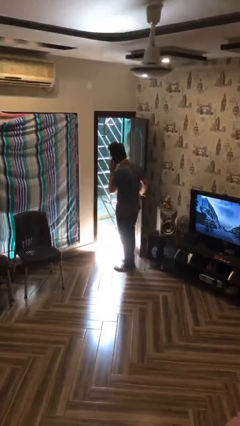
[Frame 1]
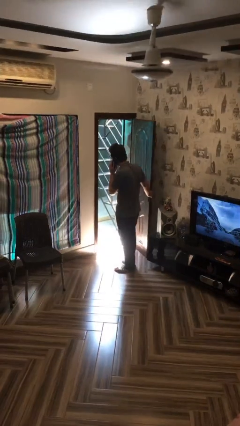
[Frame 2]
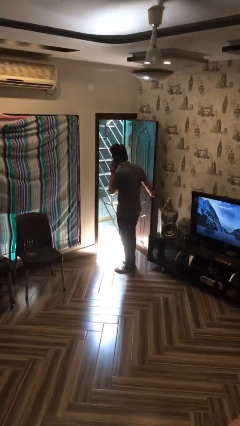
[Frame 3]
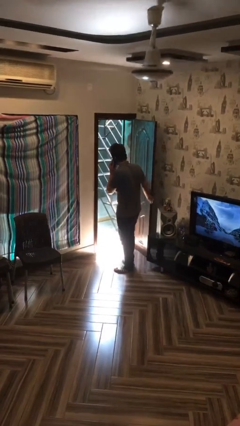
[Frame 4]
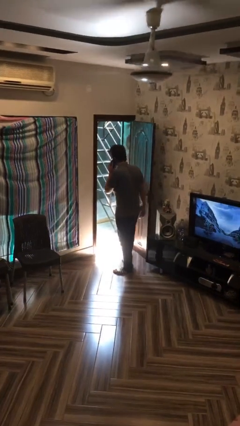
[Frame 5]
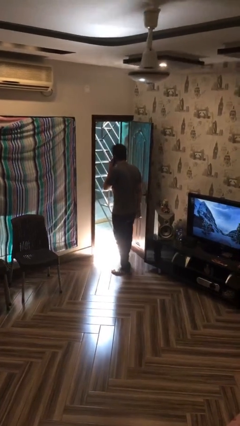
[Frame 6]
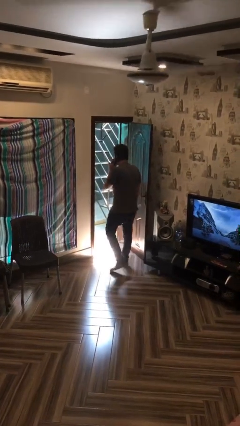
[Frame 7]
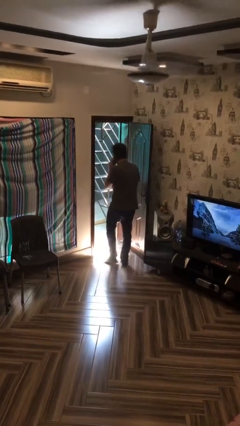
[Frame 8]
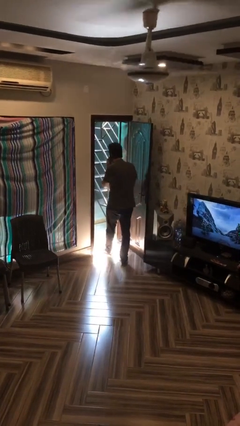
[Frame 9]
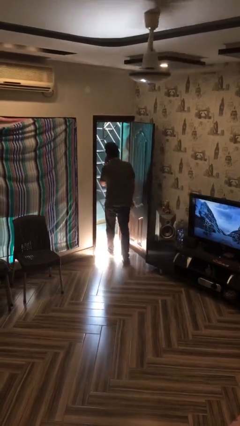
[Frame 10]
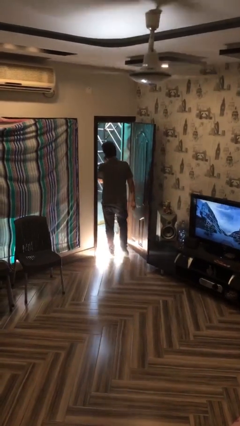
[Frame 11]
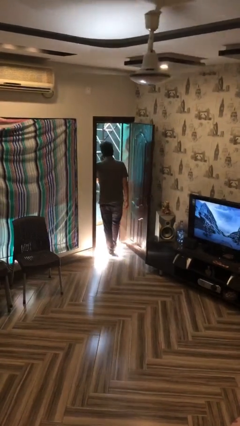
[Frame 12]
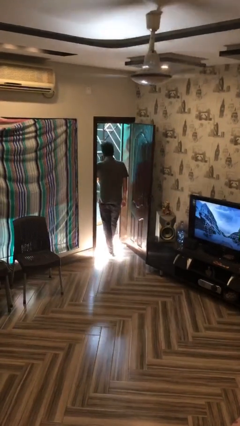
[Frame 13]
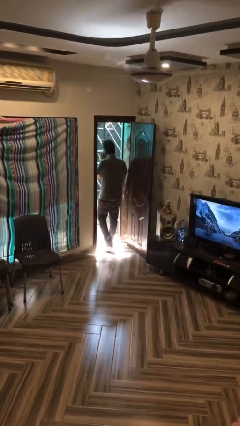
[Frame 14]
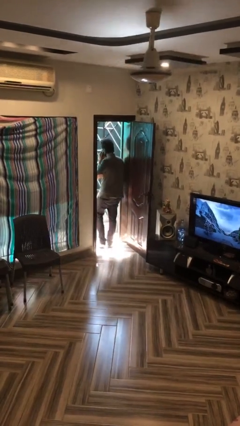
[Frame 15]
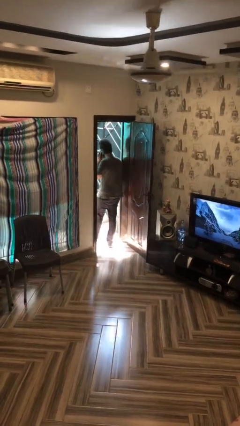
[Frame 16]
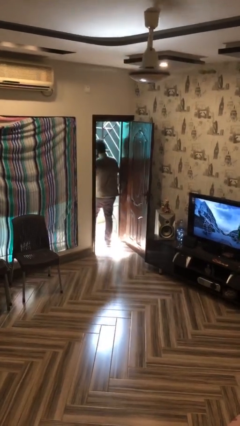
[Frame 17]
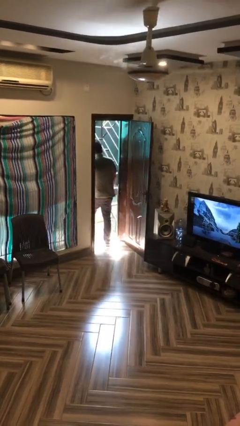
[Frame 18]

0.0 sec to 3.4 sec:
person exits scene through structure

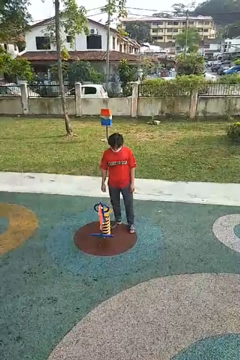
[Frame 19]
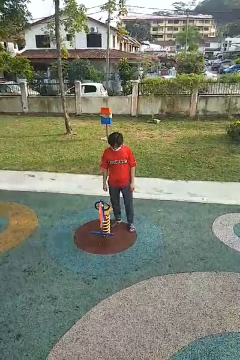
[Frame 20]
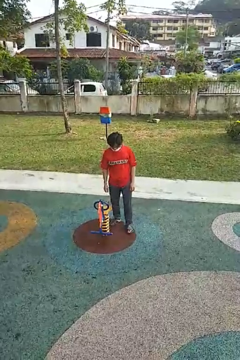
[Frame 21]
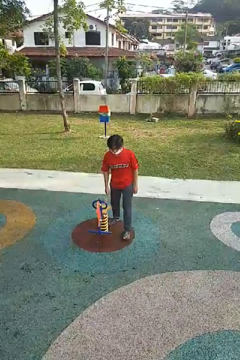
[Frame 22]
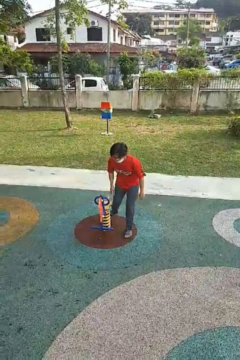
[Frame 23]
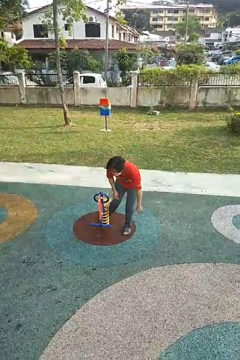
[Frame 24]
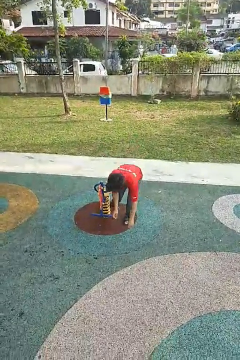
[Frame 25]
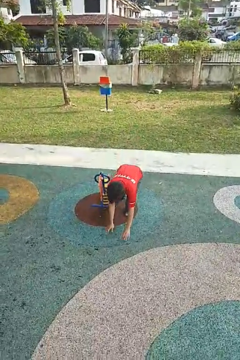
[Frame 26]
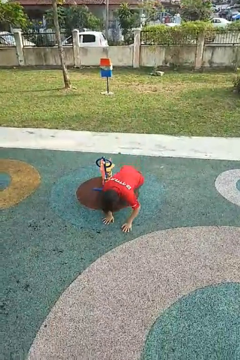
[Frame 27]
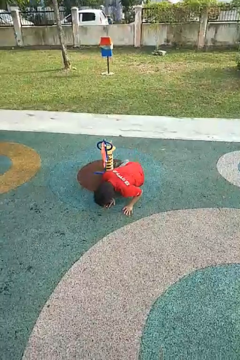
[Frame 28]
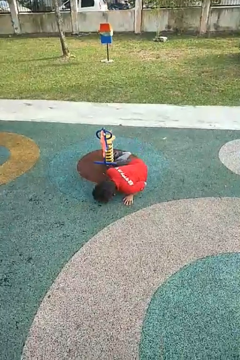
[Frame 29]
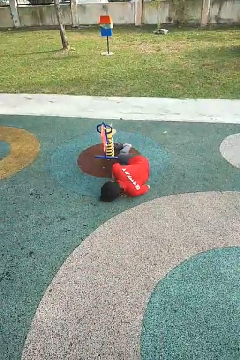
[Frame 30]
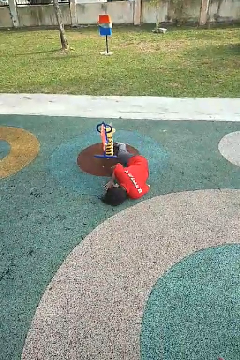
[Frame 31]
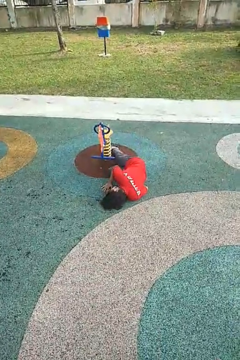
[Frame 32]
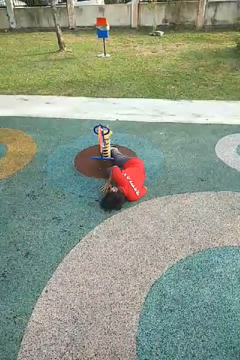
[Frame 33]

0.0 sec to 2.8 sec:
person trips on object on floor

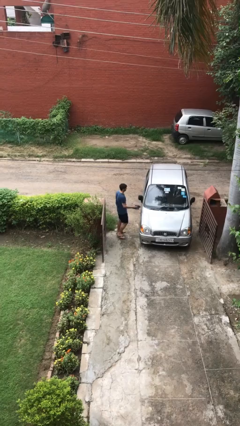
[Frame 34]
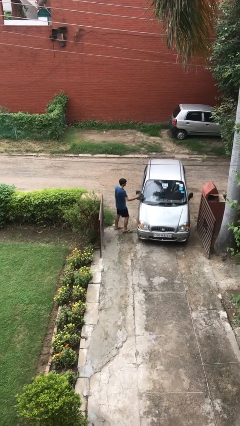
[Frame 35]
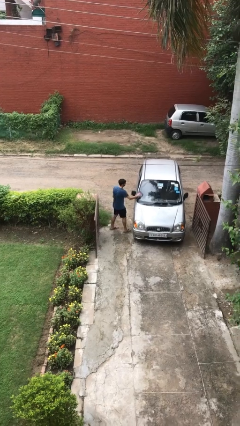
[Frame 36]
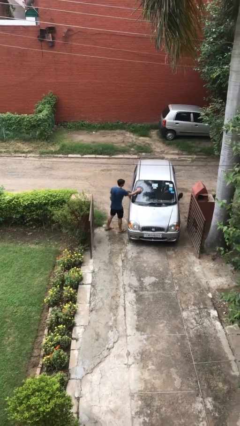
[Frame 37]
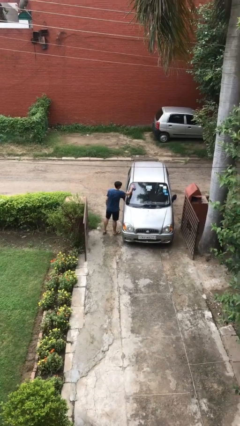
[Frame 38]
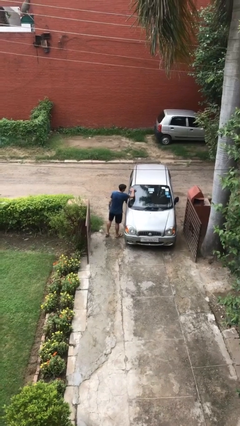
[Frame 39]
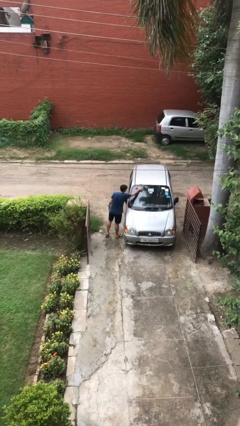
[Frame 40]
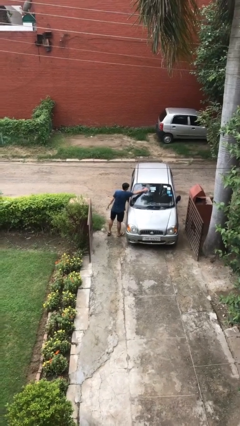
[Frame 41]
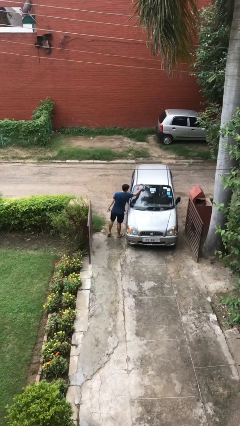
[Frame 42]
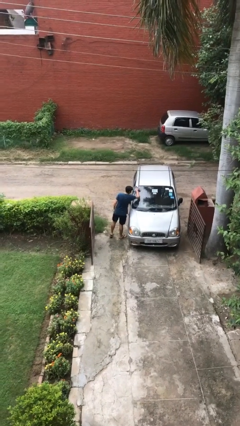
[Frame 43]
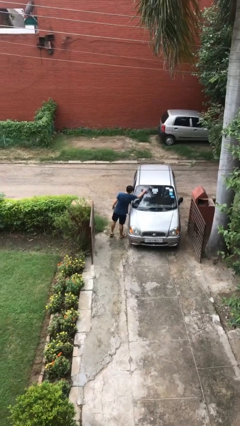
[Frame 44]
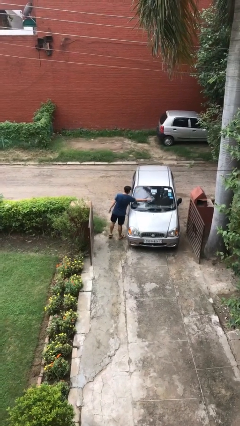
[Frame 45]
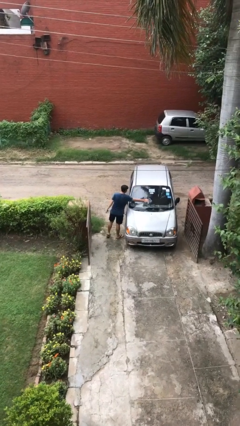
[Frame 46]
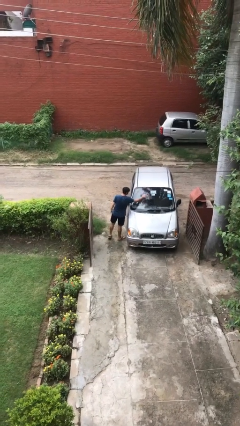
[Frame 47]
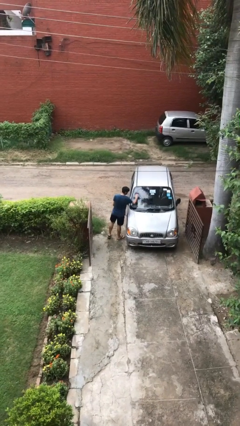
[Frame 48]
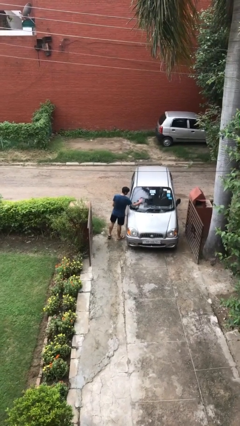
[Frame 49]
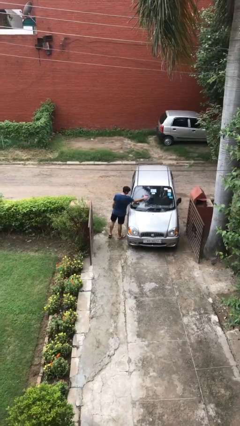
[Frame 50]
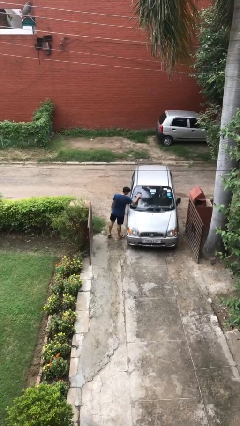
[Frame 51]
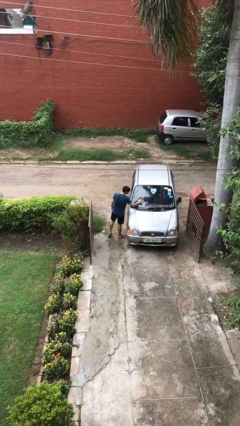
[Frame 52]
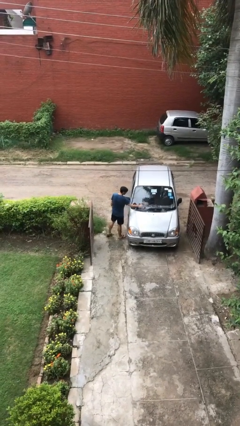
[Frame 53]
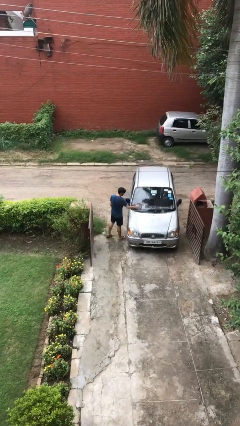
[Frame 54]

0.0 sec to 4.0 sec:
person polishes car with rag

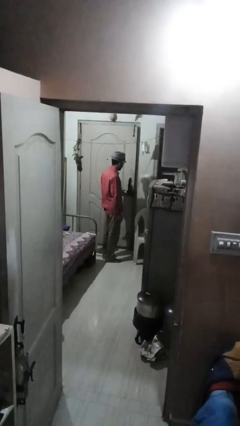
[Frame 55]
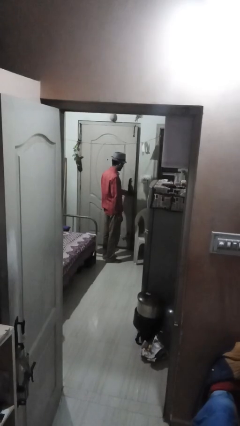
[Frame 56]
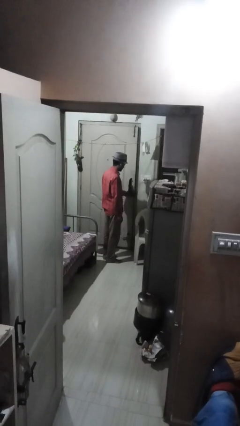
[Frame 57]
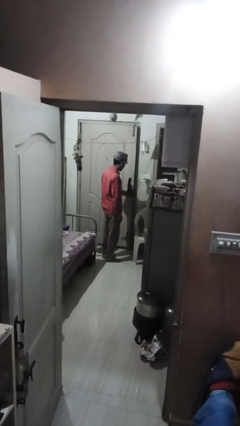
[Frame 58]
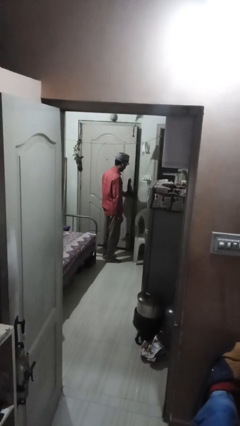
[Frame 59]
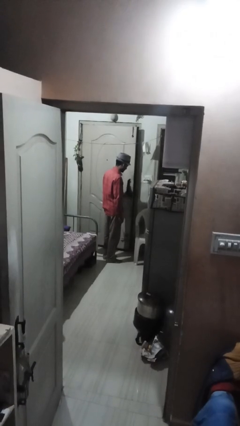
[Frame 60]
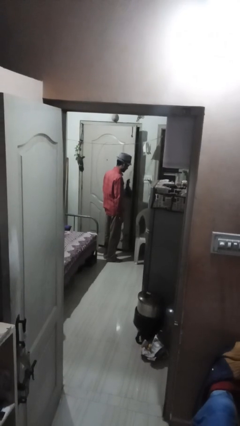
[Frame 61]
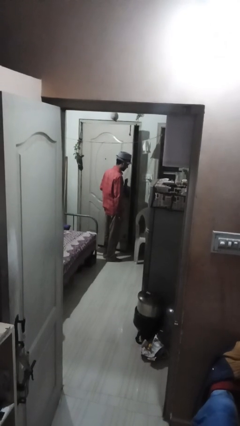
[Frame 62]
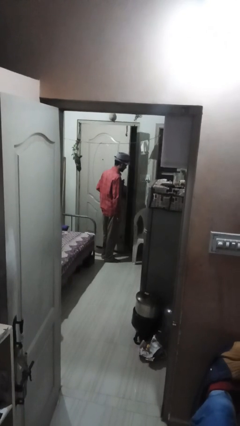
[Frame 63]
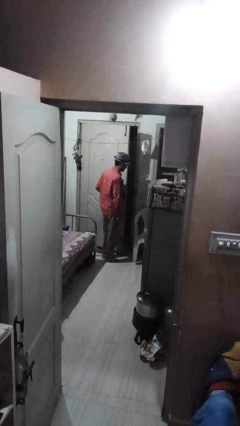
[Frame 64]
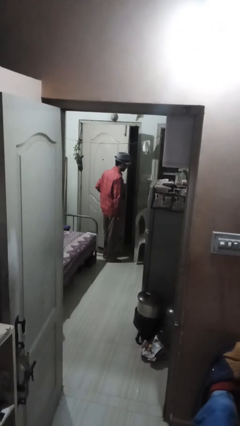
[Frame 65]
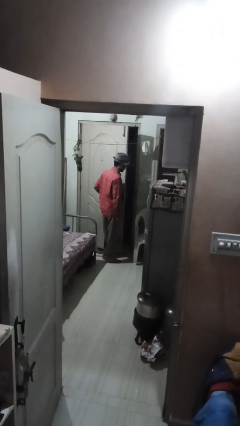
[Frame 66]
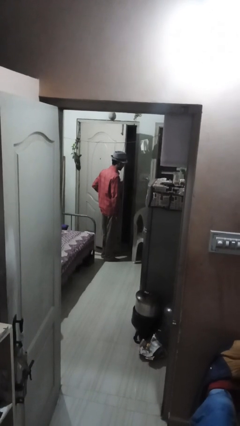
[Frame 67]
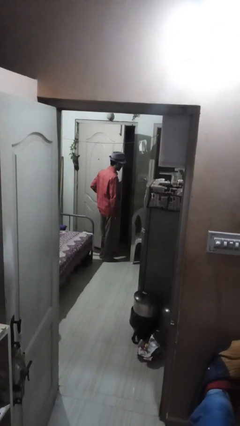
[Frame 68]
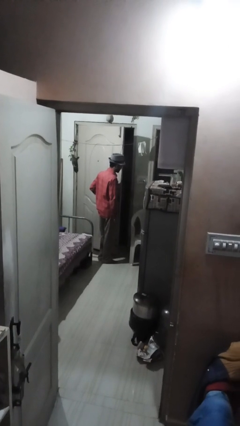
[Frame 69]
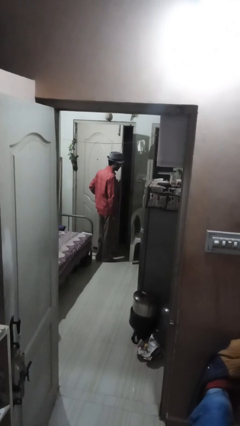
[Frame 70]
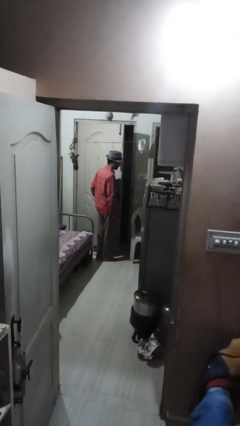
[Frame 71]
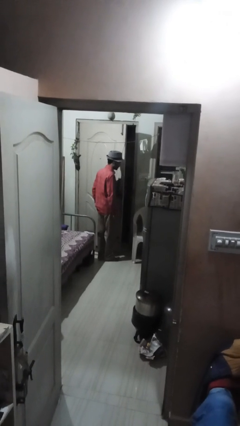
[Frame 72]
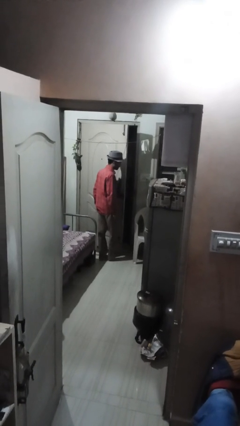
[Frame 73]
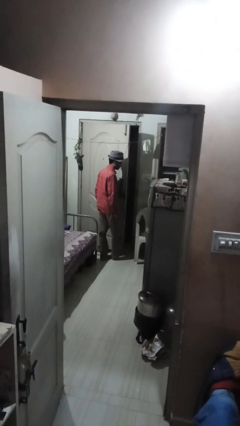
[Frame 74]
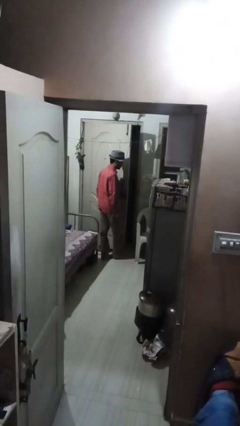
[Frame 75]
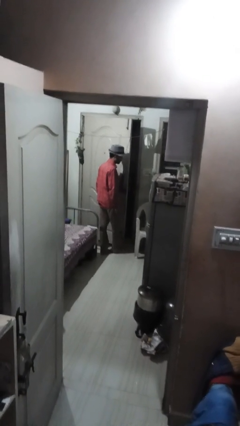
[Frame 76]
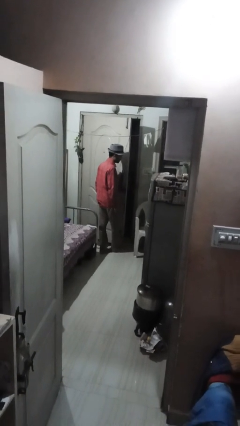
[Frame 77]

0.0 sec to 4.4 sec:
person opens facility door

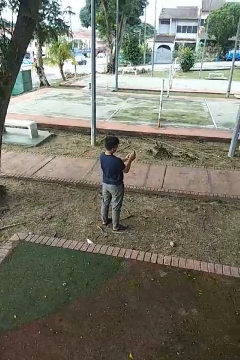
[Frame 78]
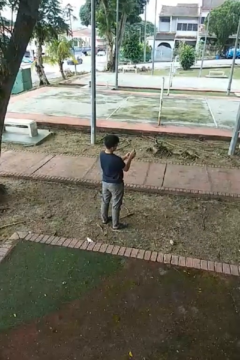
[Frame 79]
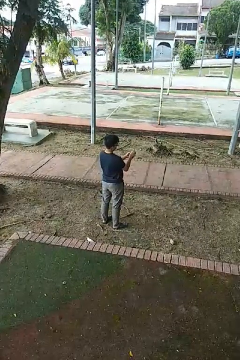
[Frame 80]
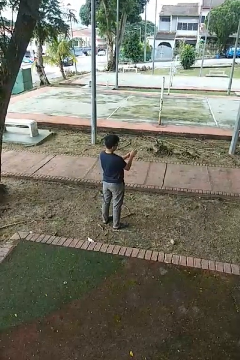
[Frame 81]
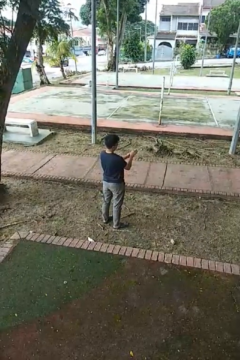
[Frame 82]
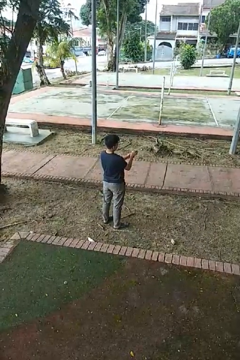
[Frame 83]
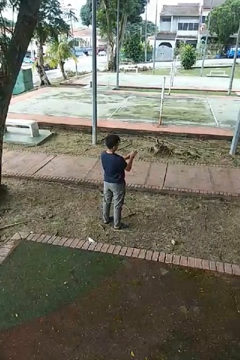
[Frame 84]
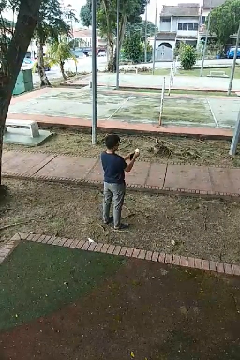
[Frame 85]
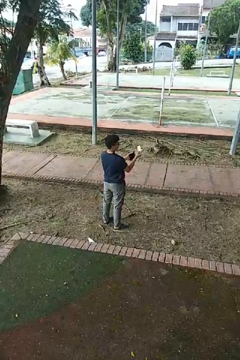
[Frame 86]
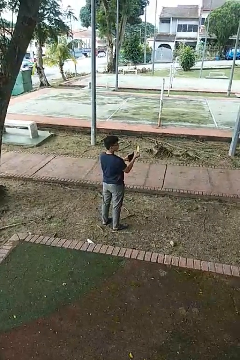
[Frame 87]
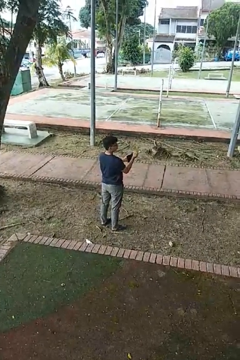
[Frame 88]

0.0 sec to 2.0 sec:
person takes object from purse

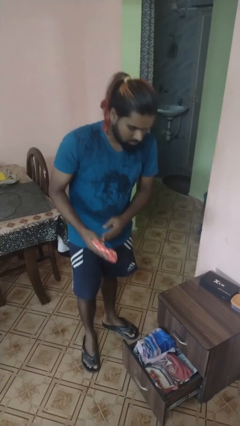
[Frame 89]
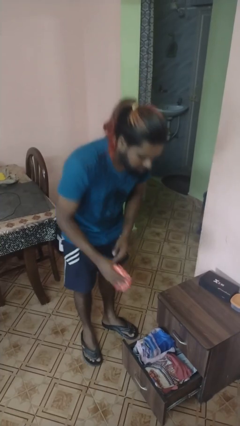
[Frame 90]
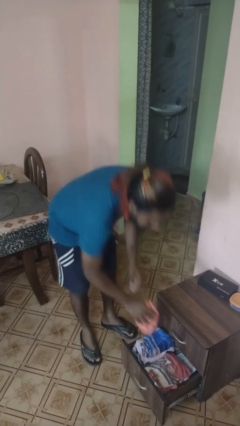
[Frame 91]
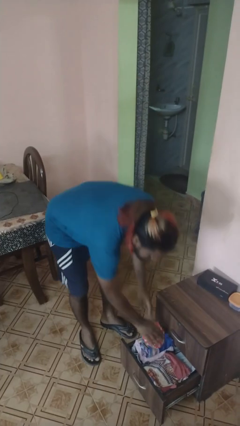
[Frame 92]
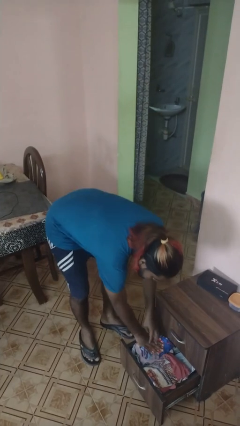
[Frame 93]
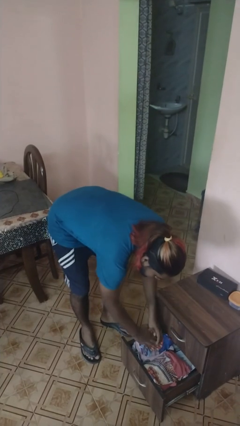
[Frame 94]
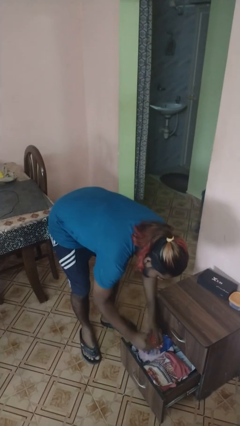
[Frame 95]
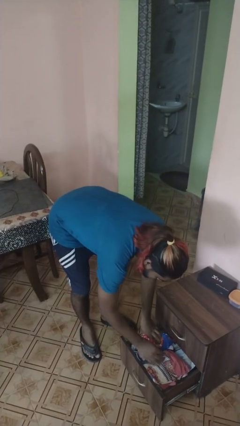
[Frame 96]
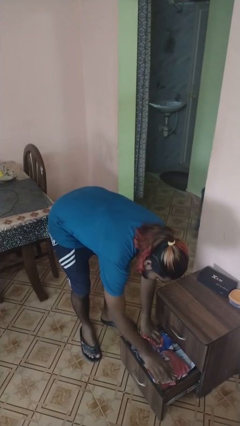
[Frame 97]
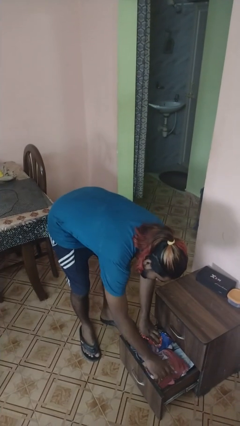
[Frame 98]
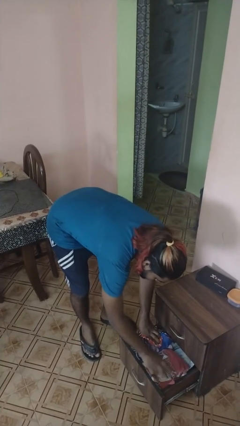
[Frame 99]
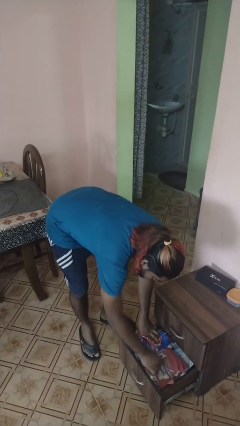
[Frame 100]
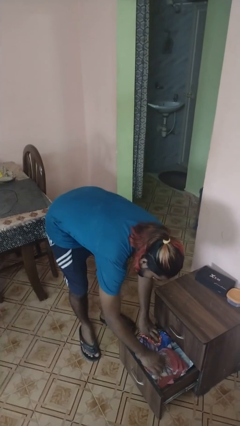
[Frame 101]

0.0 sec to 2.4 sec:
person puts clothes into dresser
